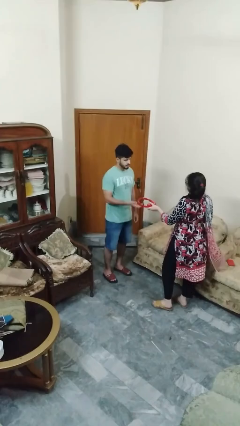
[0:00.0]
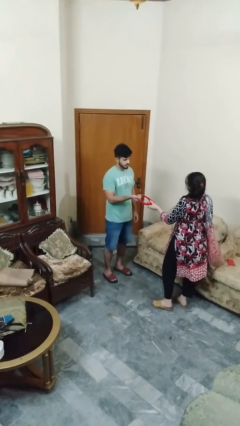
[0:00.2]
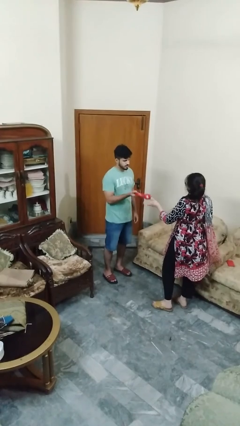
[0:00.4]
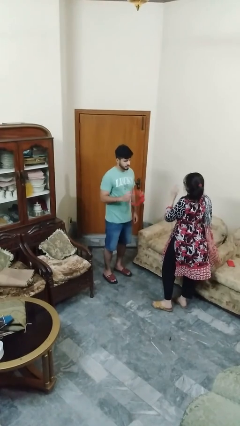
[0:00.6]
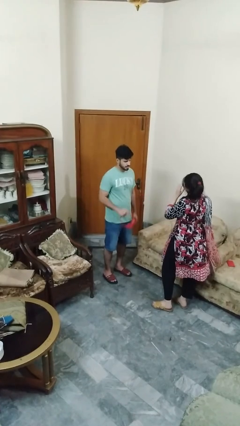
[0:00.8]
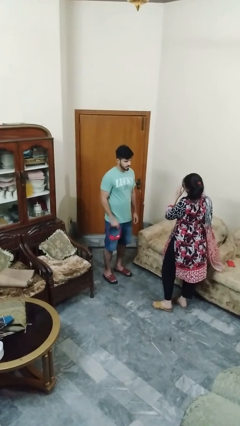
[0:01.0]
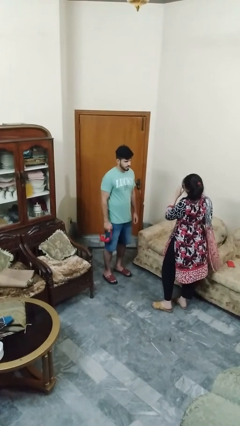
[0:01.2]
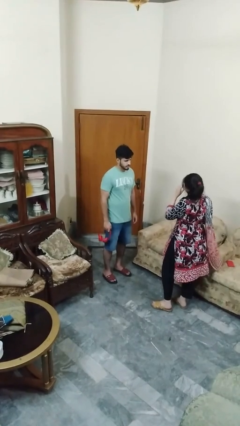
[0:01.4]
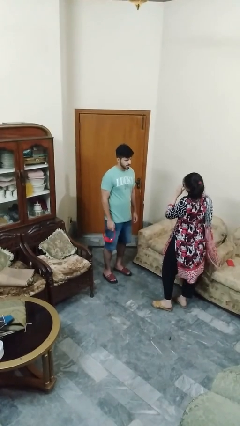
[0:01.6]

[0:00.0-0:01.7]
person transfers object to person

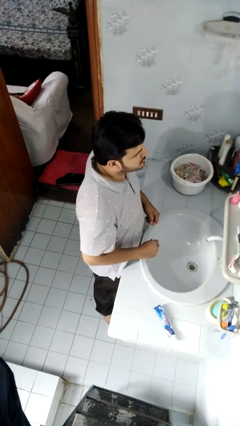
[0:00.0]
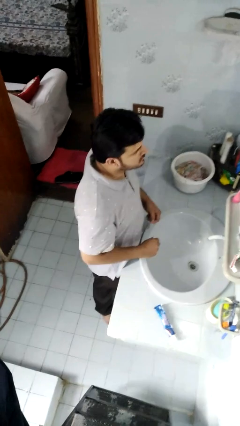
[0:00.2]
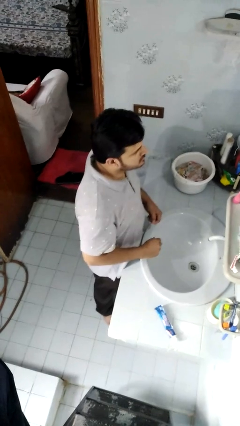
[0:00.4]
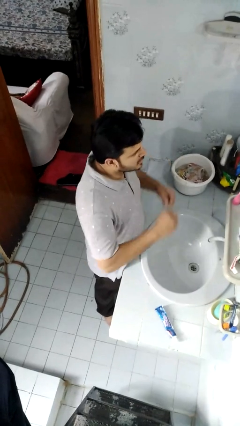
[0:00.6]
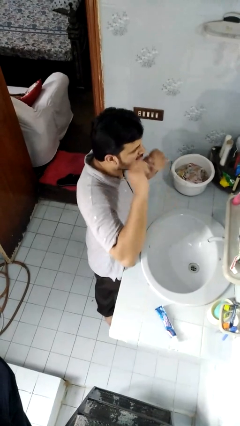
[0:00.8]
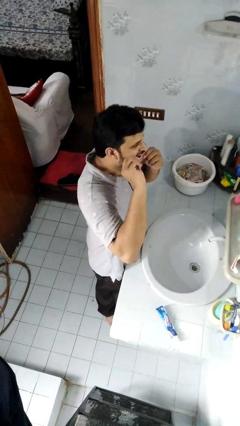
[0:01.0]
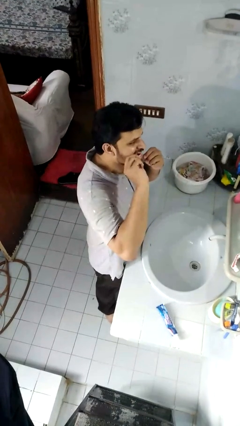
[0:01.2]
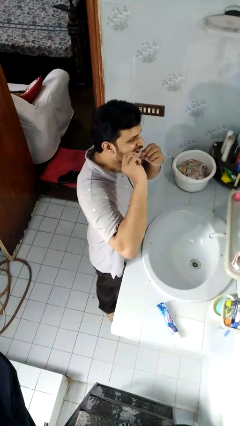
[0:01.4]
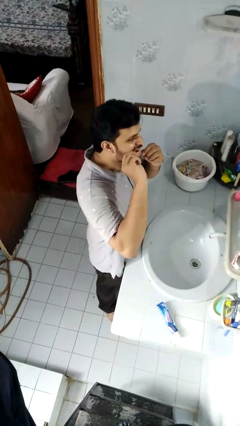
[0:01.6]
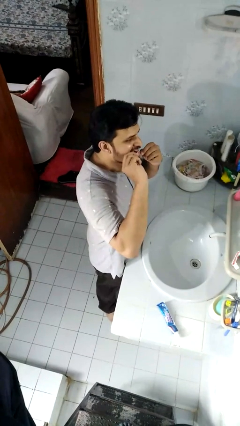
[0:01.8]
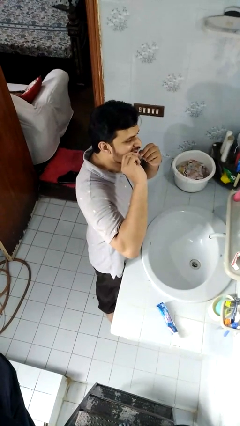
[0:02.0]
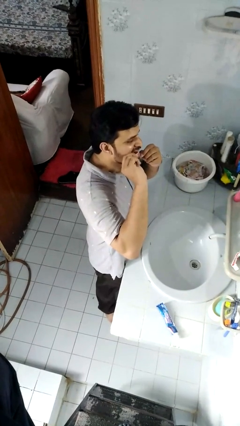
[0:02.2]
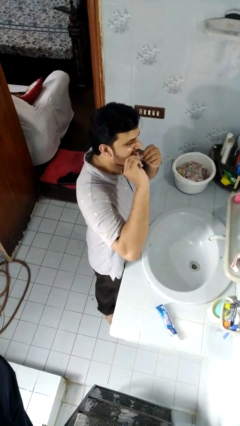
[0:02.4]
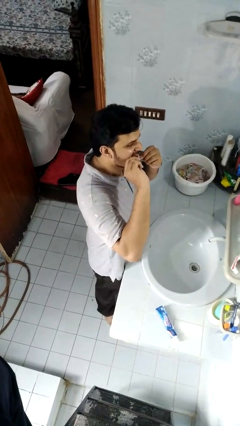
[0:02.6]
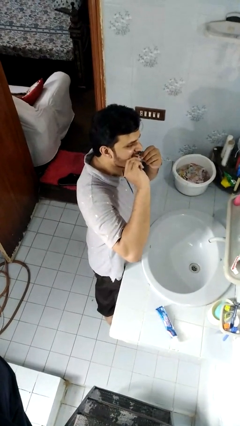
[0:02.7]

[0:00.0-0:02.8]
person flosses

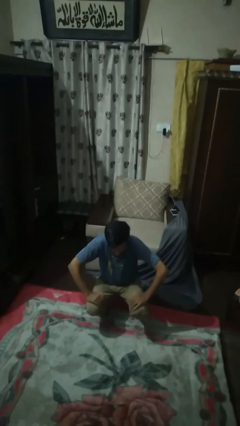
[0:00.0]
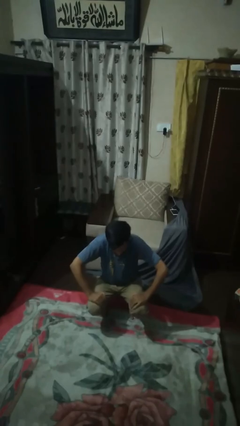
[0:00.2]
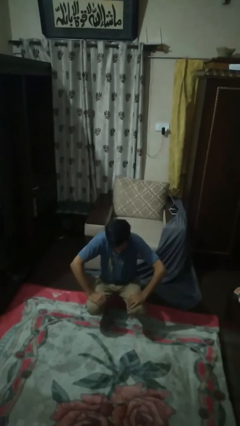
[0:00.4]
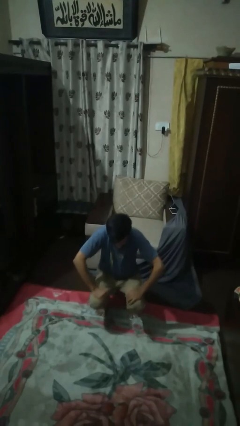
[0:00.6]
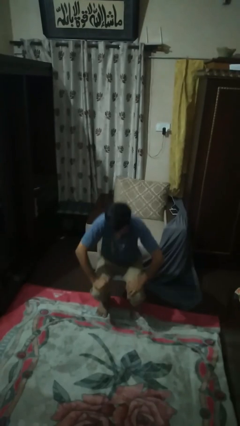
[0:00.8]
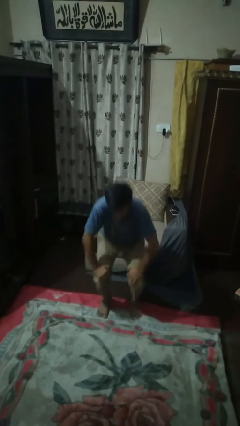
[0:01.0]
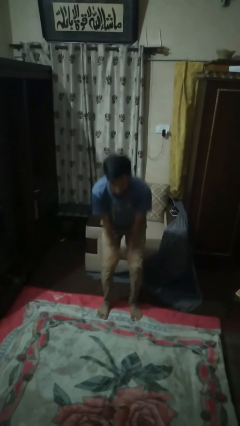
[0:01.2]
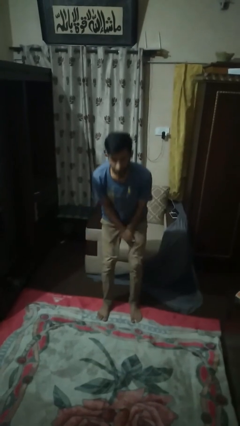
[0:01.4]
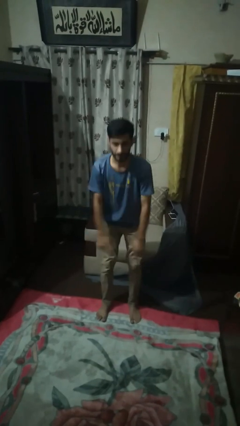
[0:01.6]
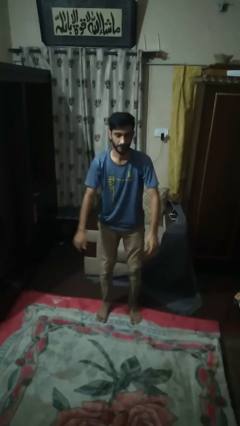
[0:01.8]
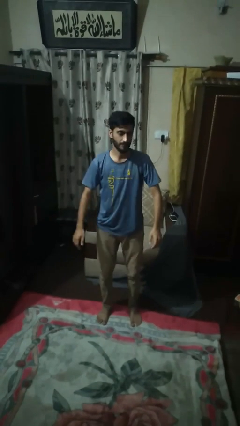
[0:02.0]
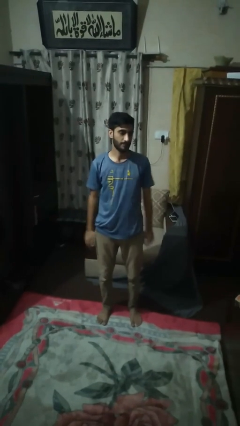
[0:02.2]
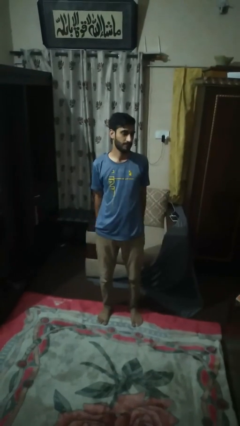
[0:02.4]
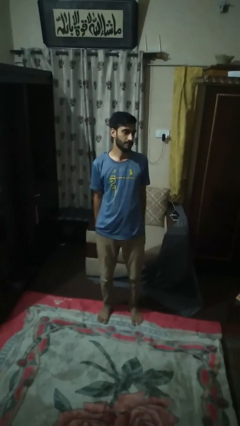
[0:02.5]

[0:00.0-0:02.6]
person stands up

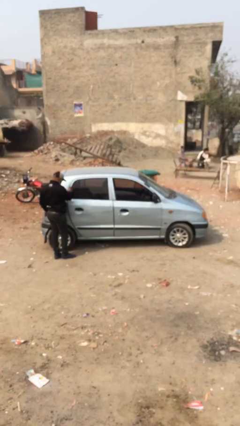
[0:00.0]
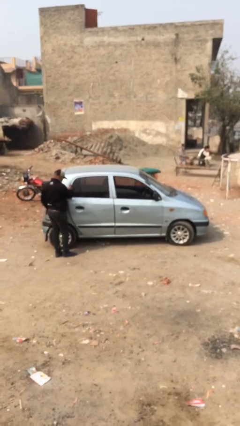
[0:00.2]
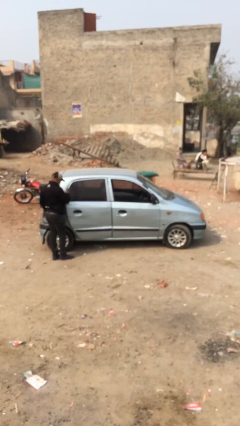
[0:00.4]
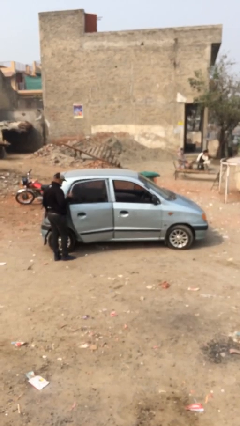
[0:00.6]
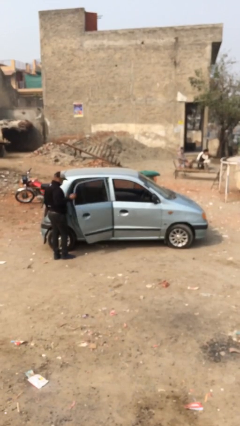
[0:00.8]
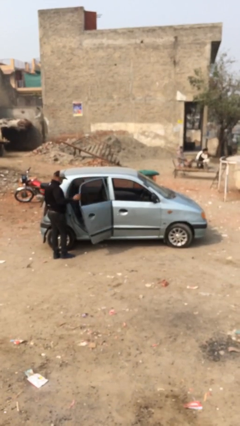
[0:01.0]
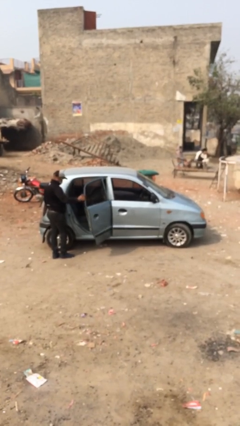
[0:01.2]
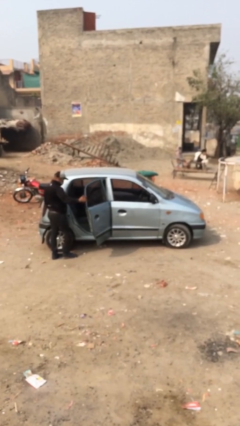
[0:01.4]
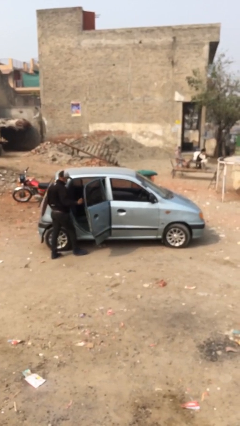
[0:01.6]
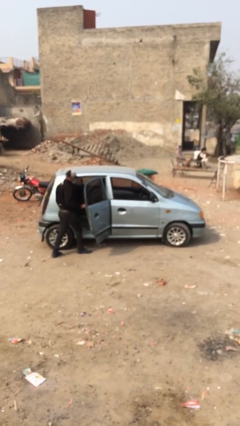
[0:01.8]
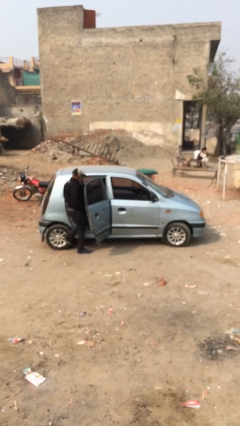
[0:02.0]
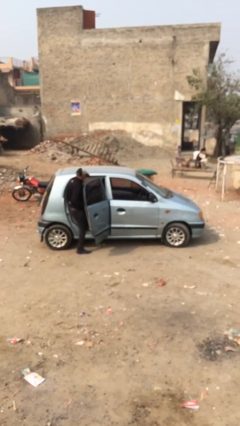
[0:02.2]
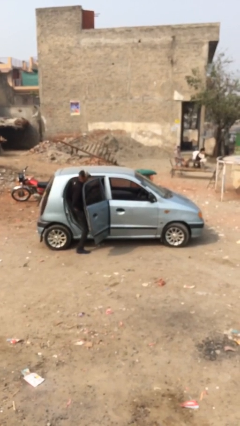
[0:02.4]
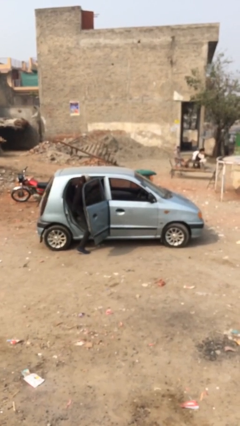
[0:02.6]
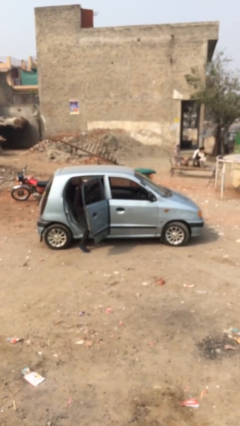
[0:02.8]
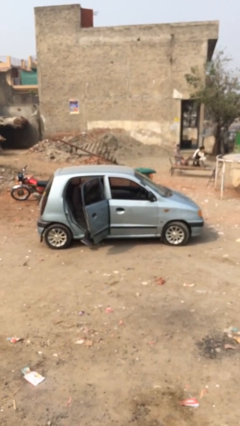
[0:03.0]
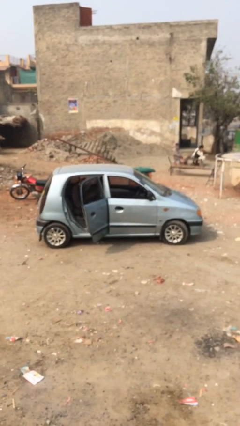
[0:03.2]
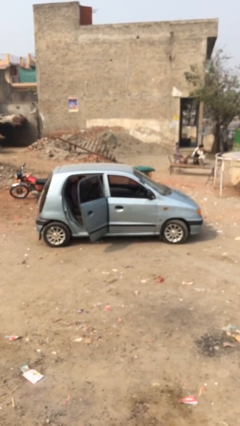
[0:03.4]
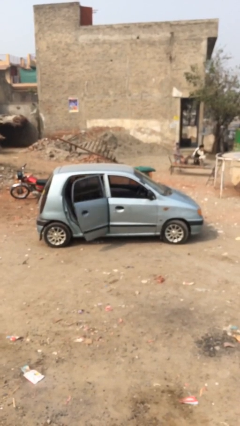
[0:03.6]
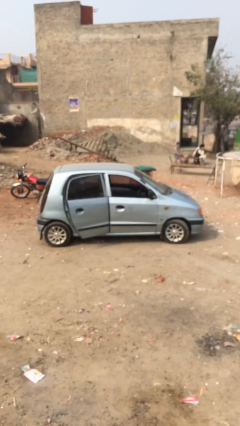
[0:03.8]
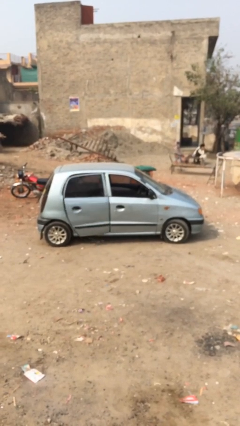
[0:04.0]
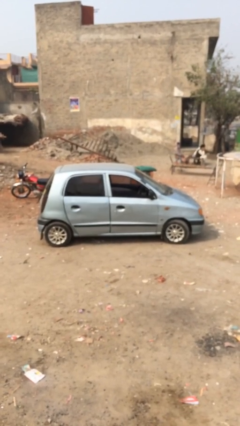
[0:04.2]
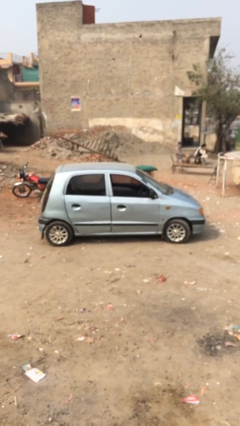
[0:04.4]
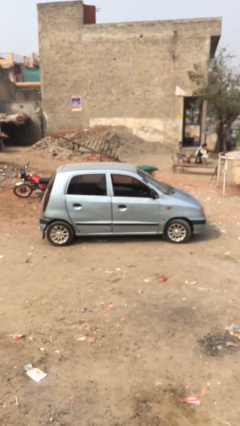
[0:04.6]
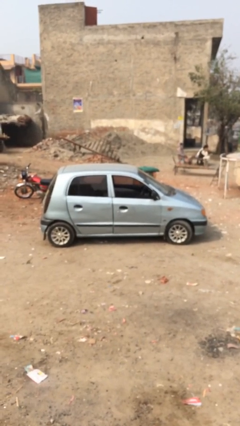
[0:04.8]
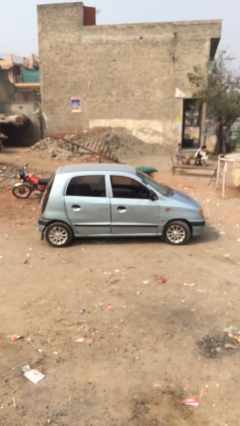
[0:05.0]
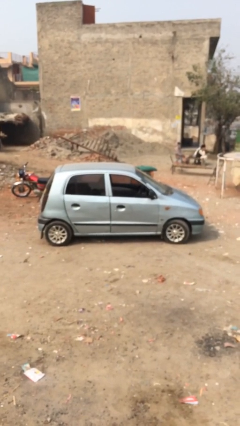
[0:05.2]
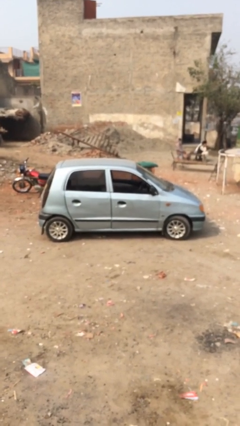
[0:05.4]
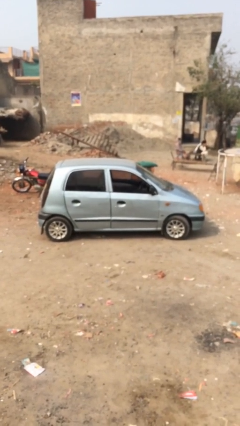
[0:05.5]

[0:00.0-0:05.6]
car picks up person

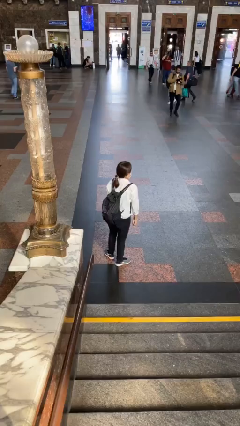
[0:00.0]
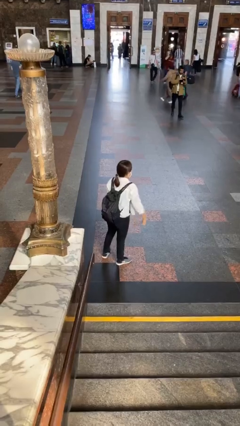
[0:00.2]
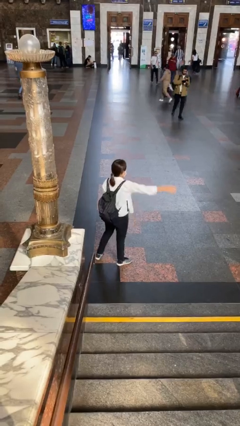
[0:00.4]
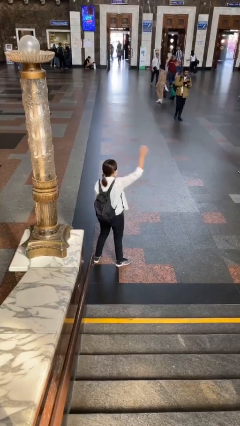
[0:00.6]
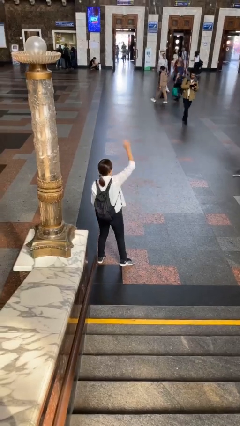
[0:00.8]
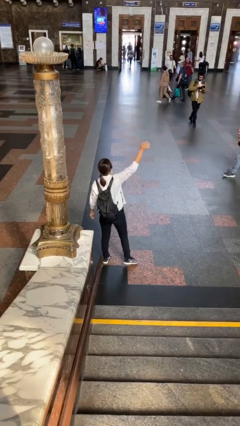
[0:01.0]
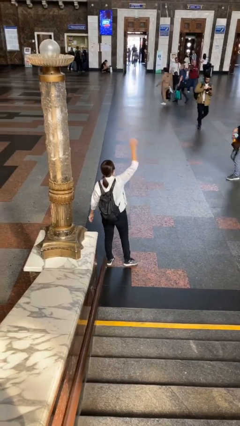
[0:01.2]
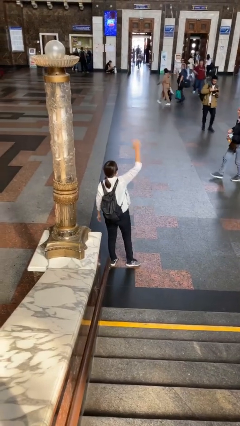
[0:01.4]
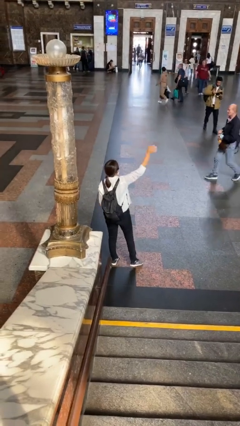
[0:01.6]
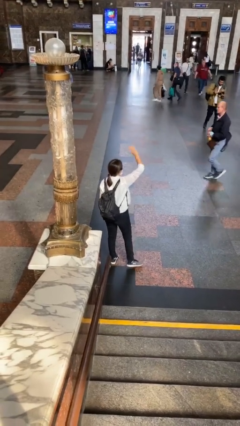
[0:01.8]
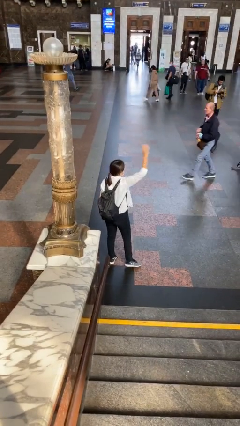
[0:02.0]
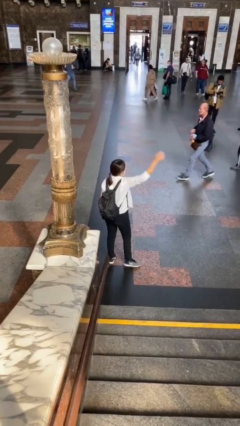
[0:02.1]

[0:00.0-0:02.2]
person waves at person

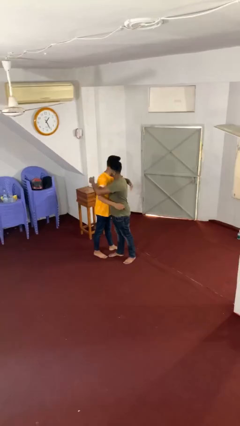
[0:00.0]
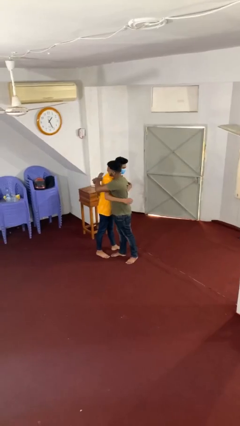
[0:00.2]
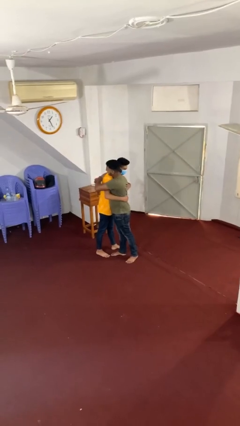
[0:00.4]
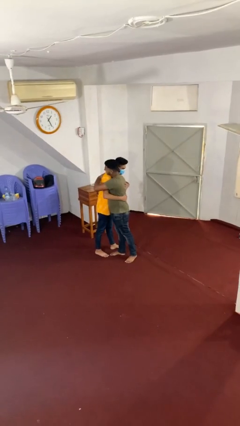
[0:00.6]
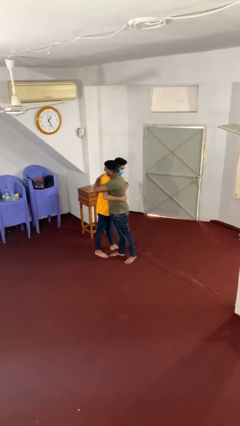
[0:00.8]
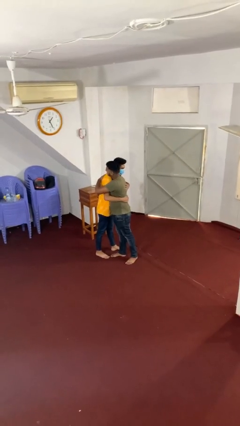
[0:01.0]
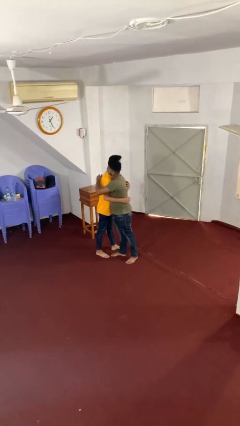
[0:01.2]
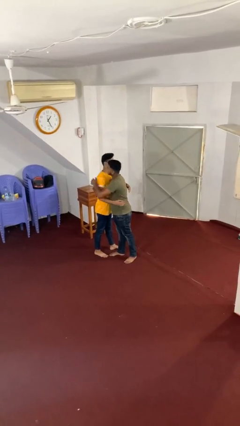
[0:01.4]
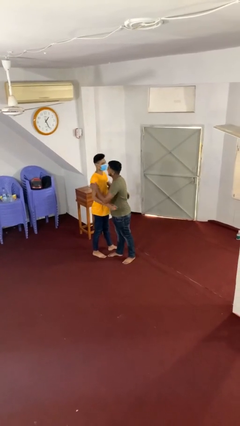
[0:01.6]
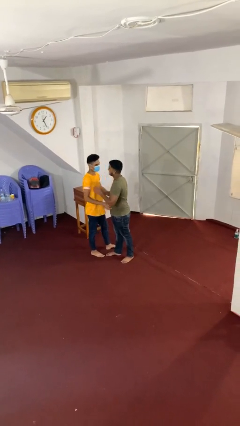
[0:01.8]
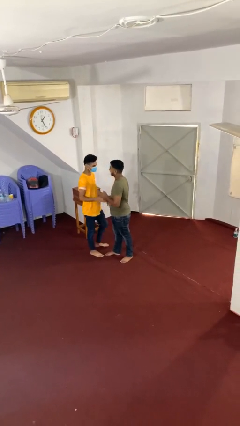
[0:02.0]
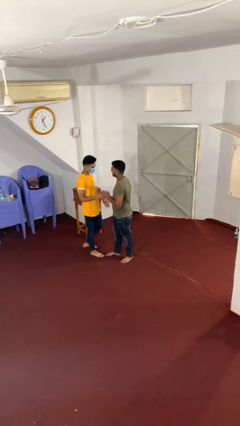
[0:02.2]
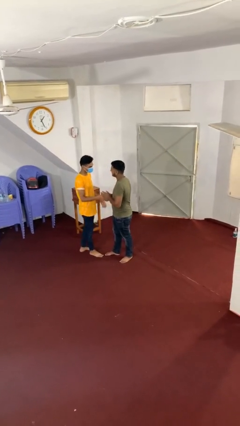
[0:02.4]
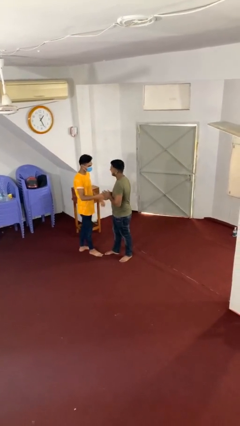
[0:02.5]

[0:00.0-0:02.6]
person embraces person
